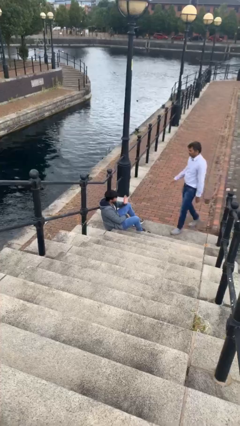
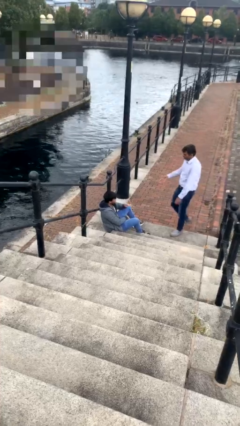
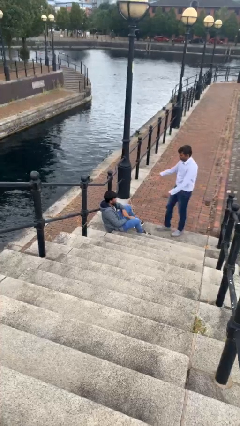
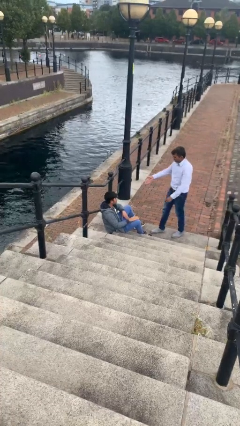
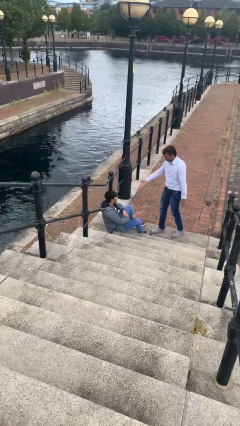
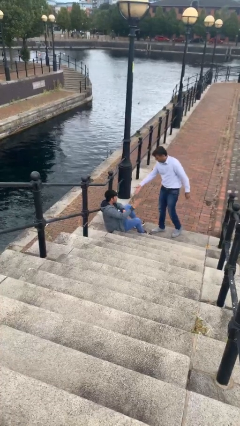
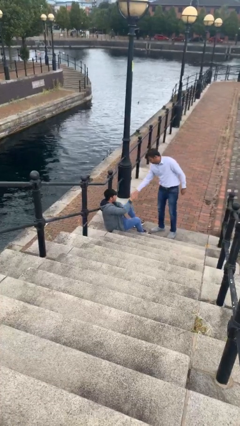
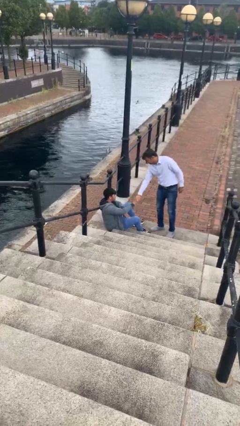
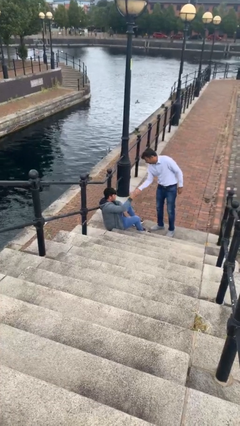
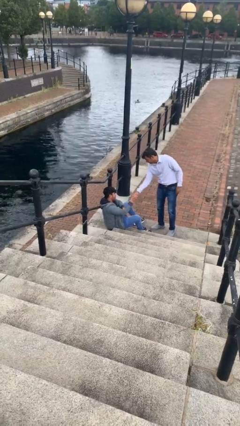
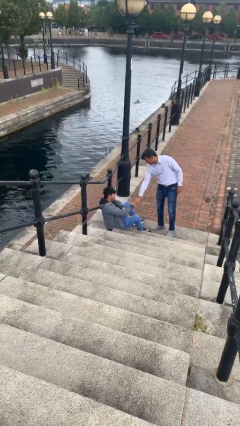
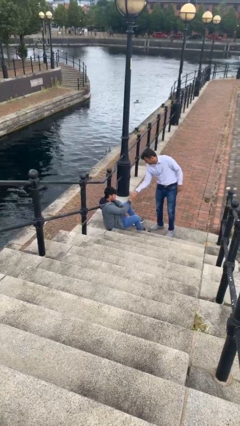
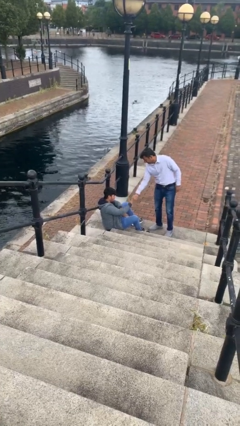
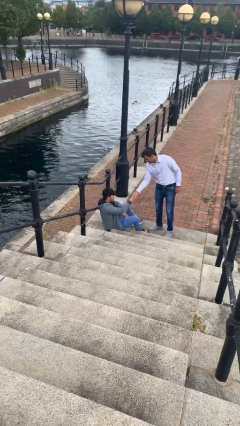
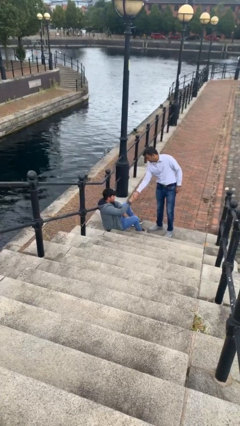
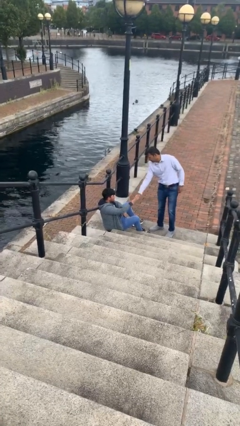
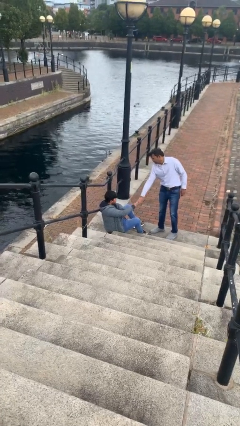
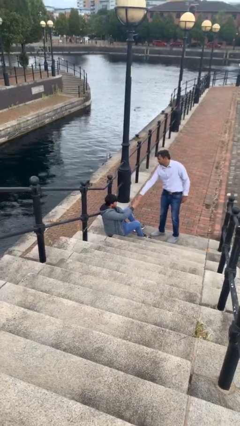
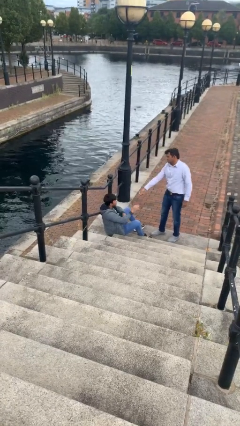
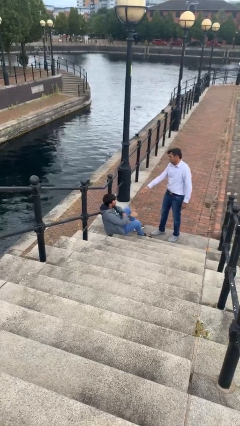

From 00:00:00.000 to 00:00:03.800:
person shakes hand

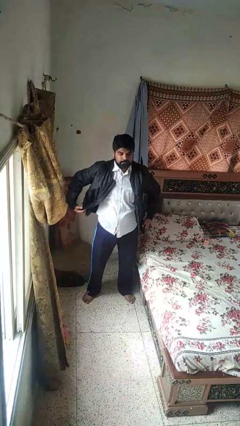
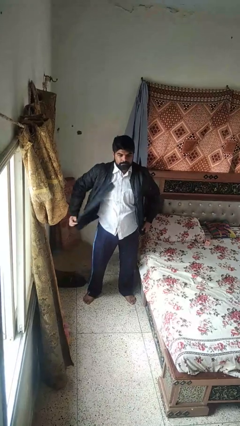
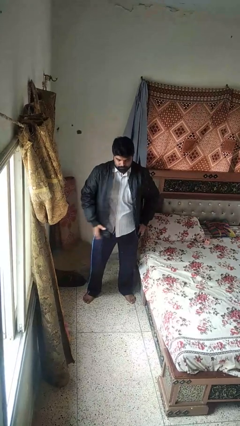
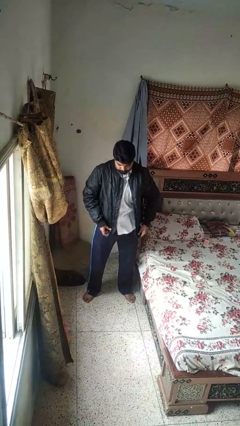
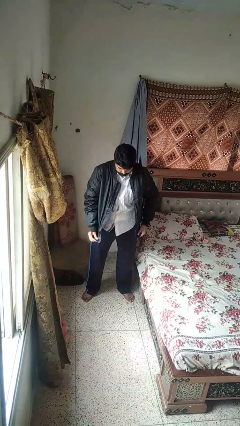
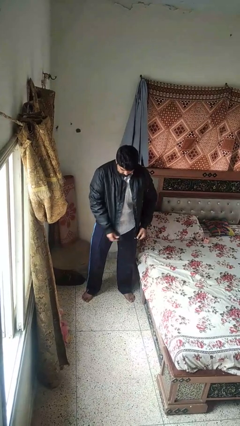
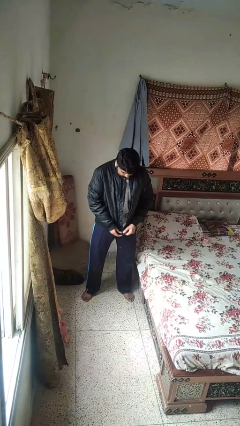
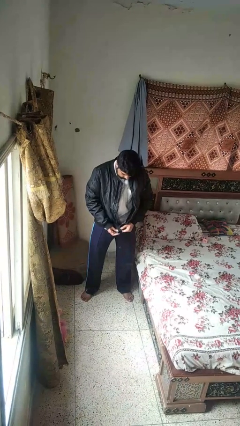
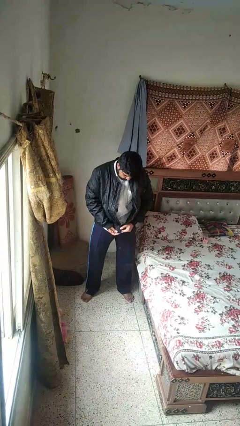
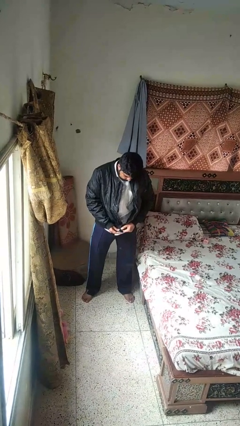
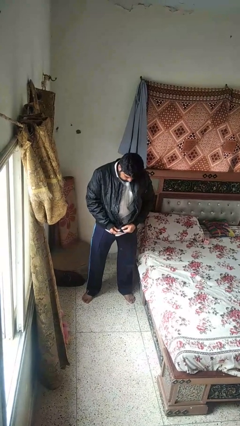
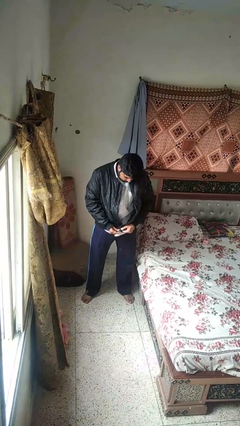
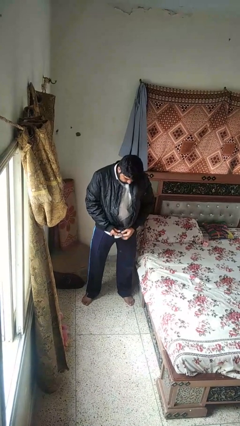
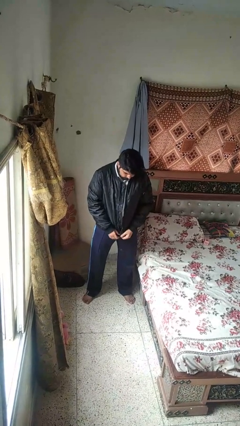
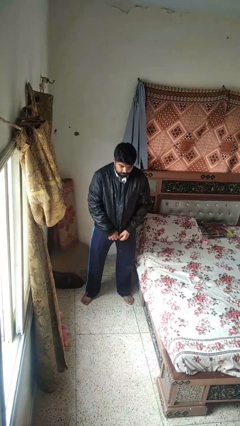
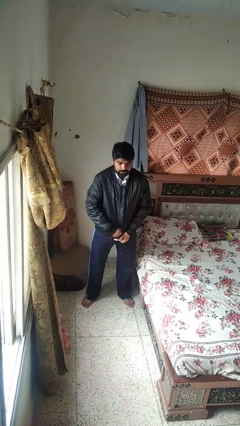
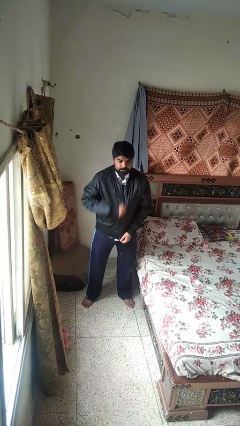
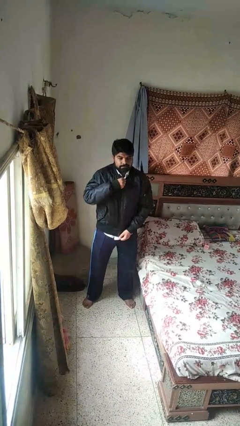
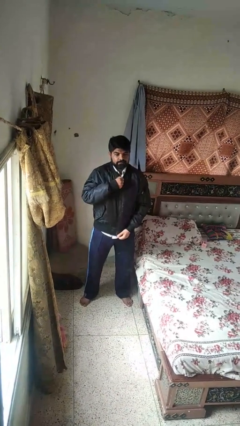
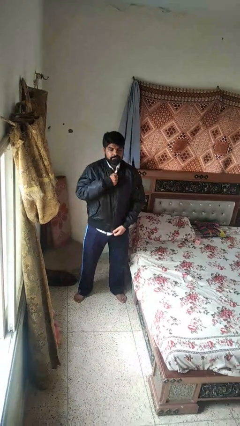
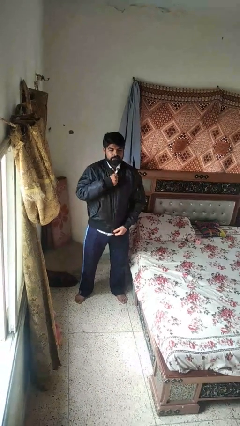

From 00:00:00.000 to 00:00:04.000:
person zips up jacket

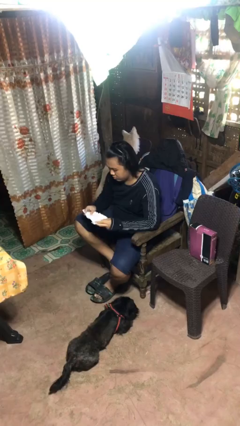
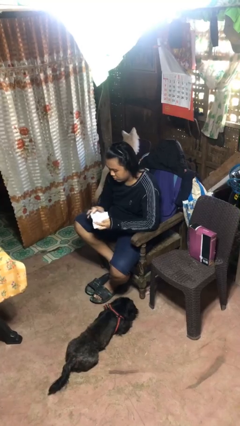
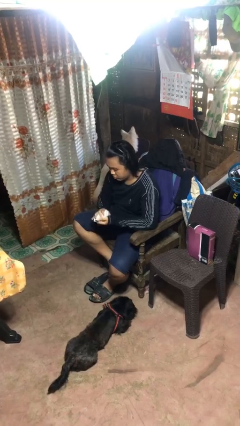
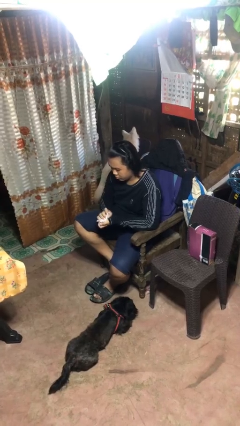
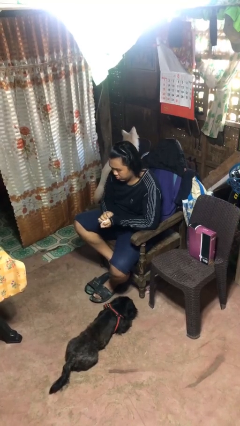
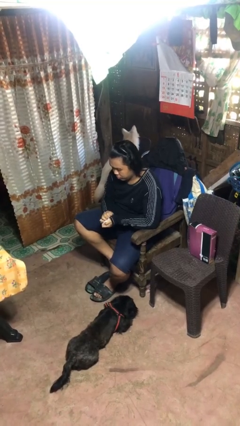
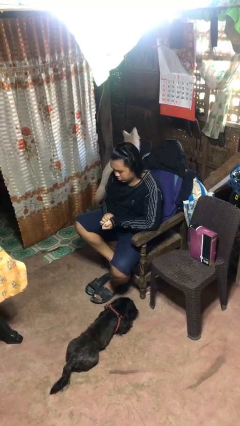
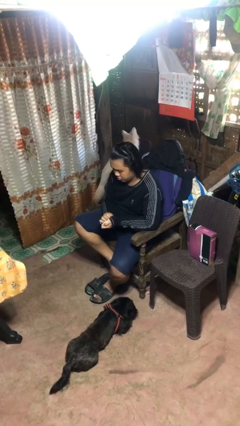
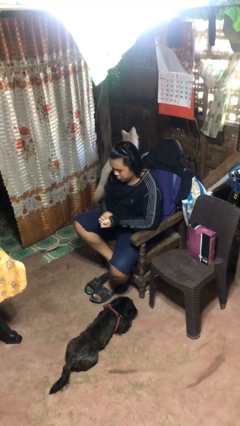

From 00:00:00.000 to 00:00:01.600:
person crumples paper

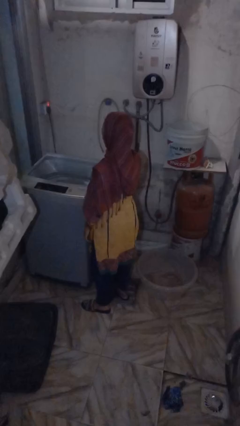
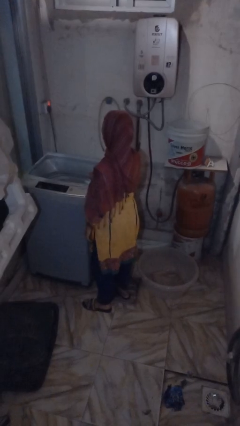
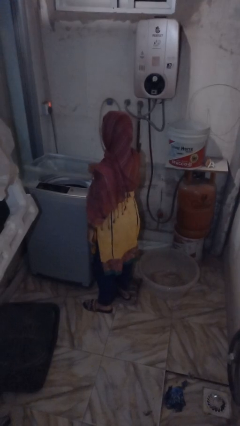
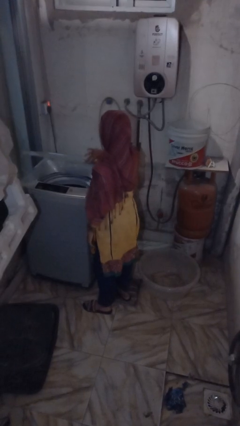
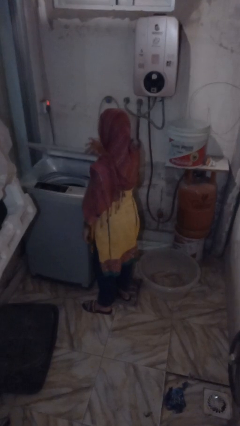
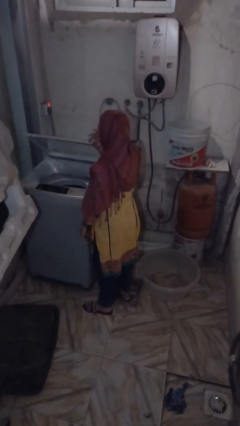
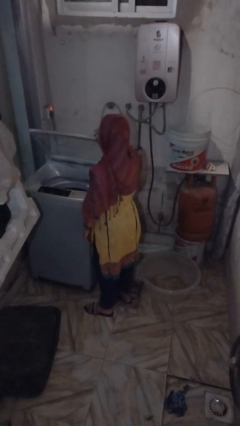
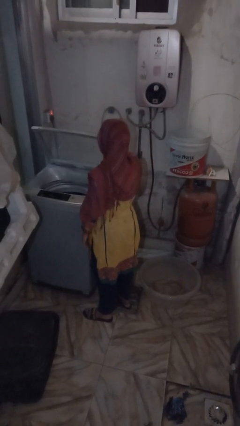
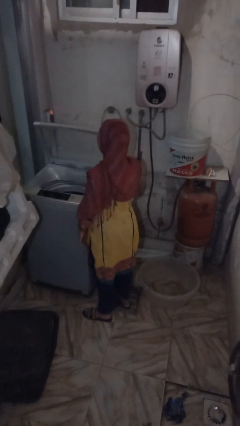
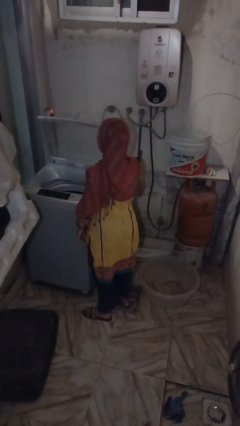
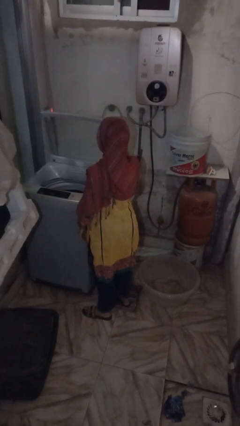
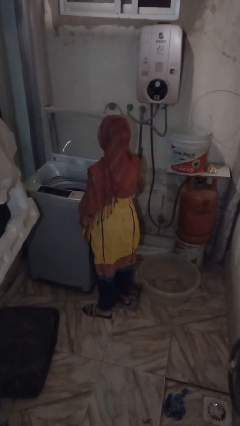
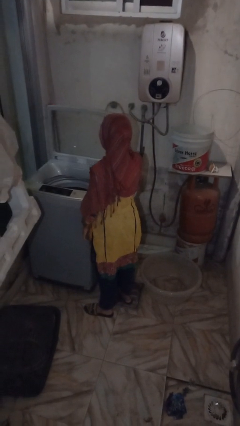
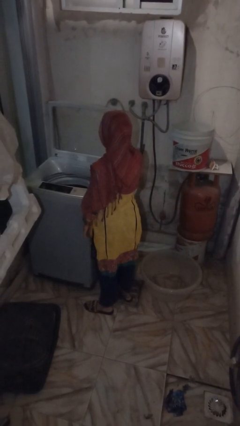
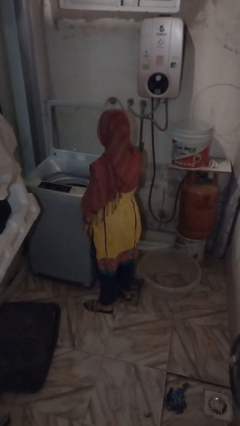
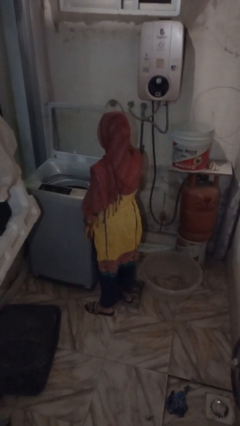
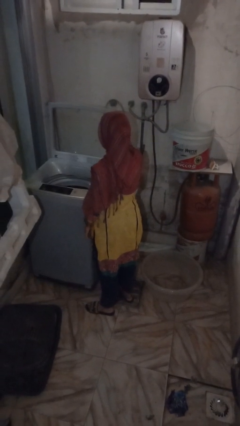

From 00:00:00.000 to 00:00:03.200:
person opens clothes washer

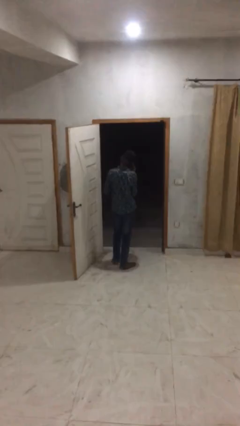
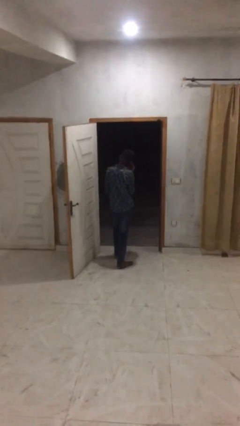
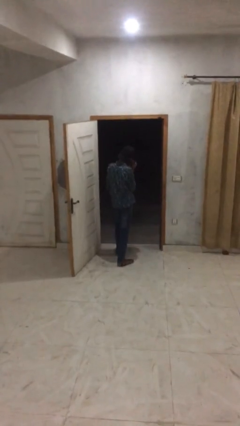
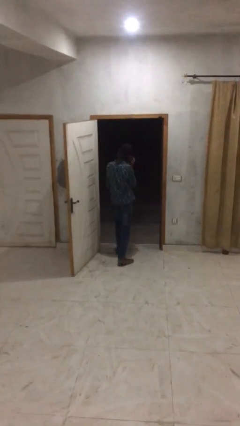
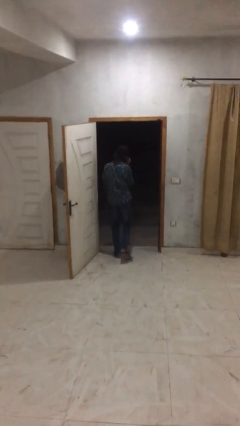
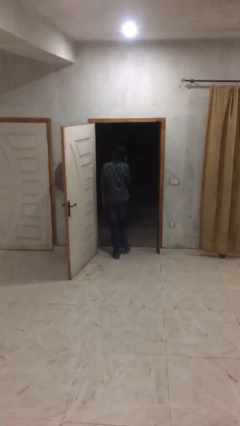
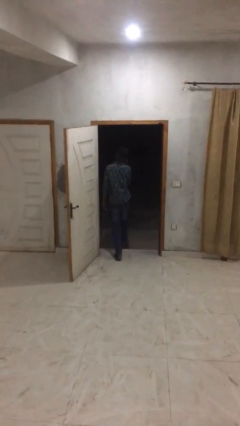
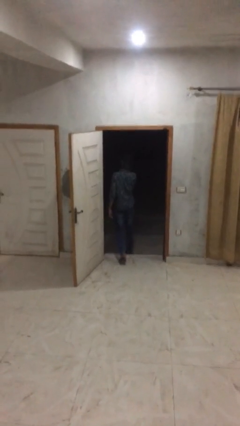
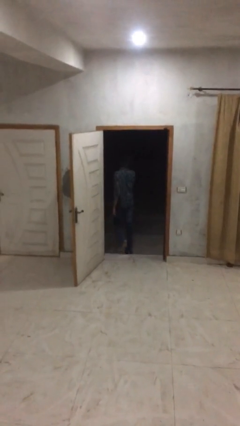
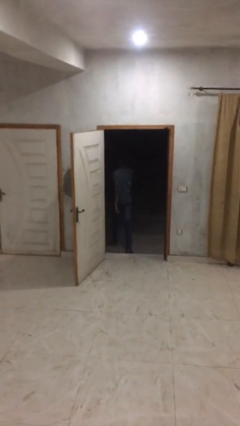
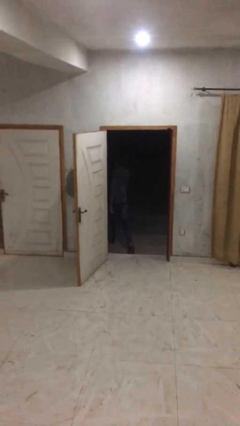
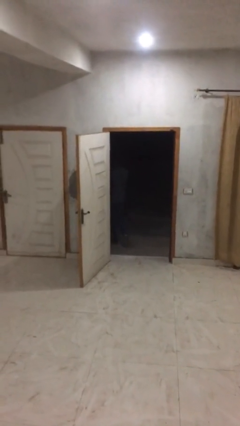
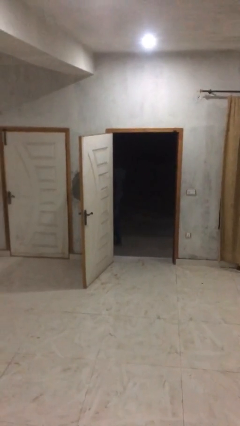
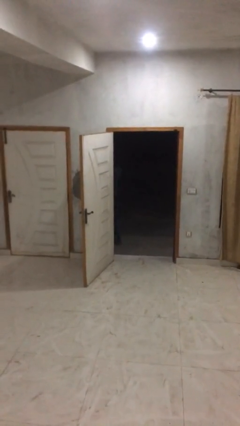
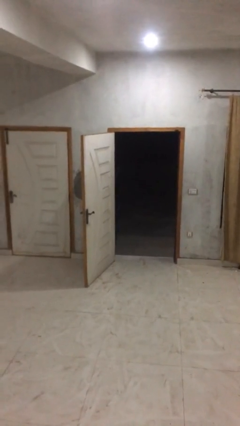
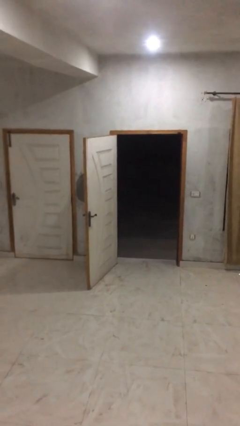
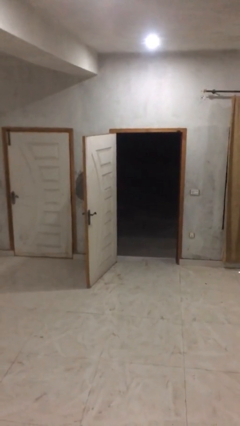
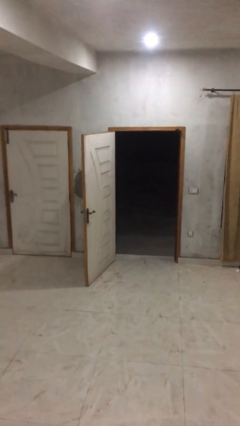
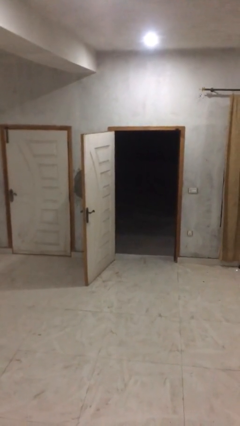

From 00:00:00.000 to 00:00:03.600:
person exits scene through structure

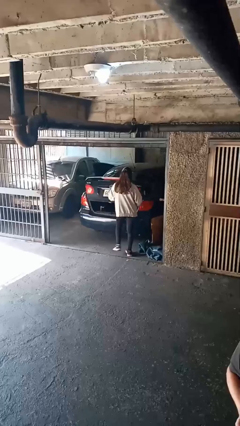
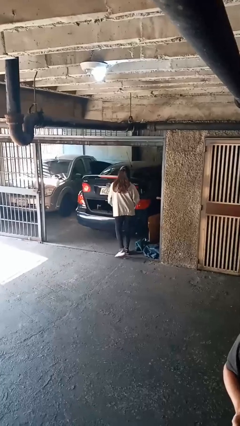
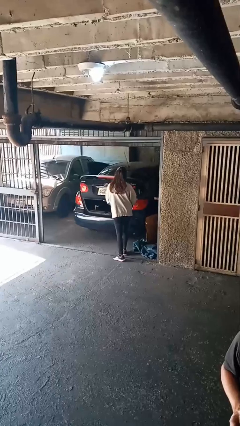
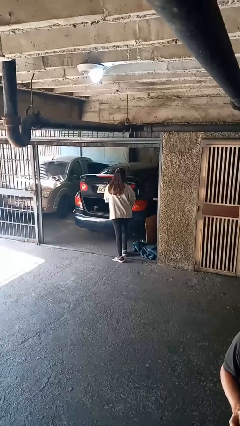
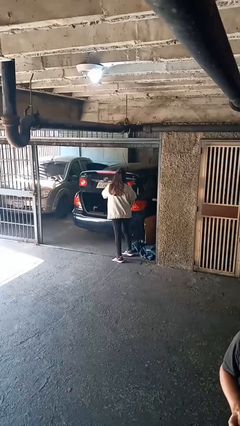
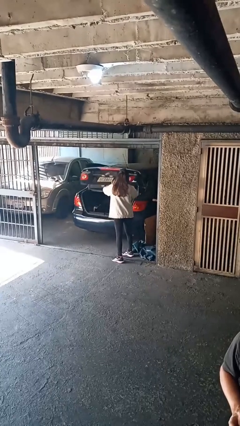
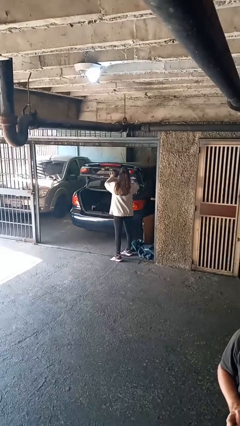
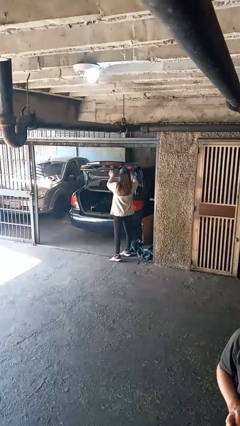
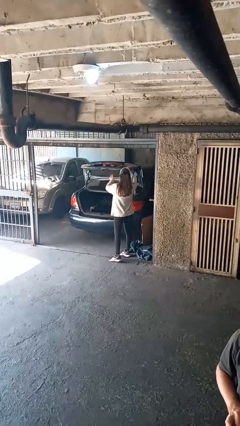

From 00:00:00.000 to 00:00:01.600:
person opens car trunk
